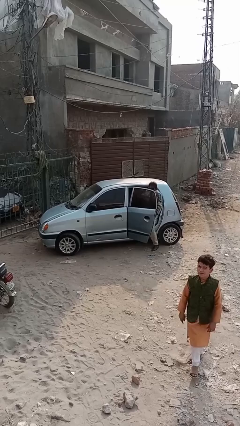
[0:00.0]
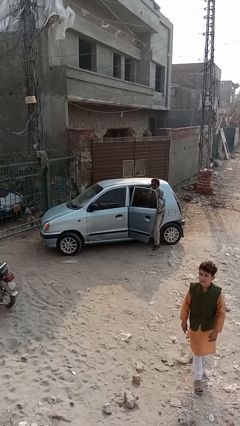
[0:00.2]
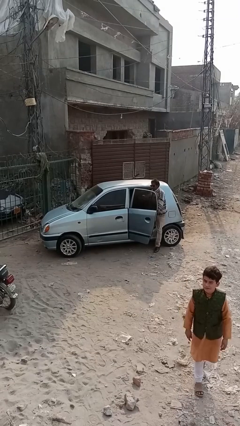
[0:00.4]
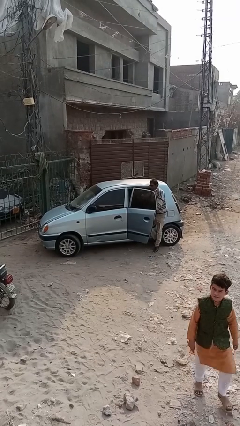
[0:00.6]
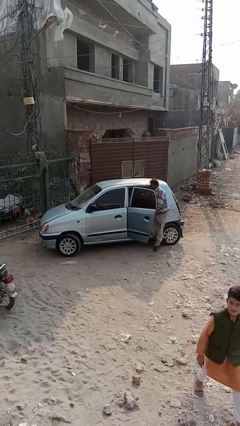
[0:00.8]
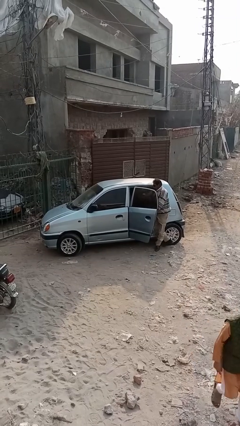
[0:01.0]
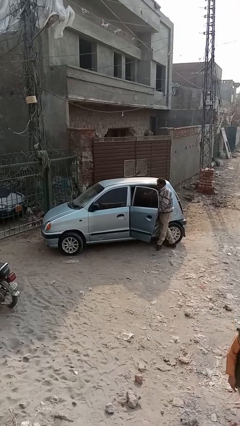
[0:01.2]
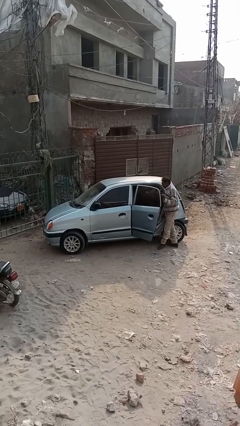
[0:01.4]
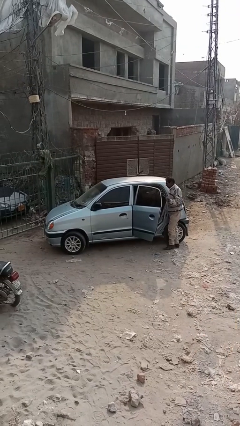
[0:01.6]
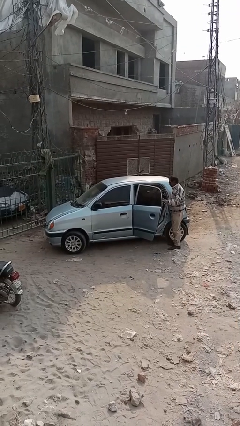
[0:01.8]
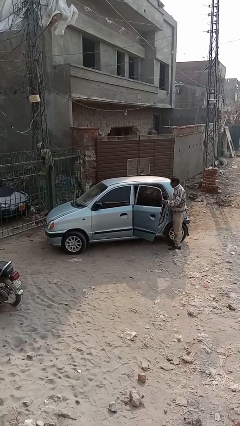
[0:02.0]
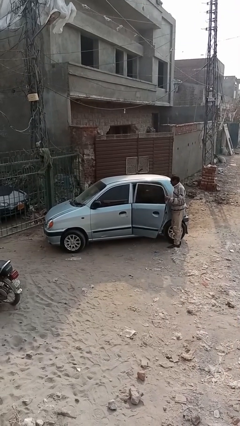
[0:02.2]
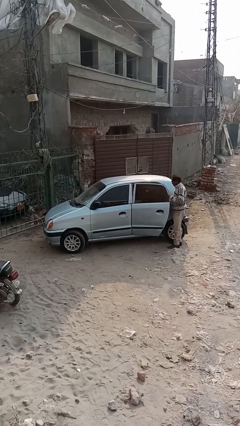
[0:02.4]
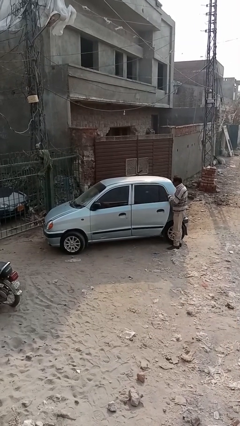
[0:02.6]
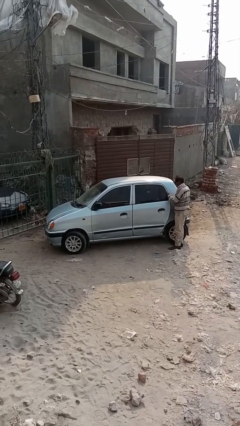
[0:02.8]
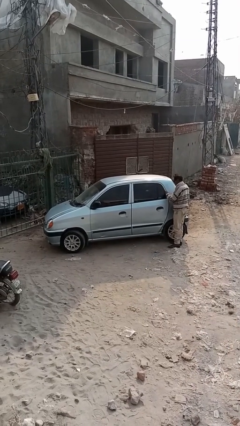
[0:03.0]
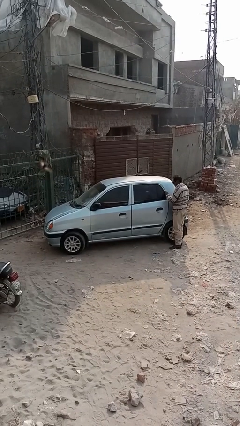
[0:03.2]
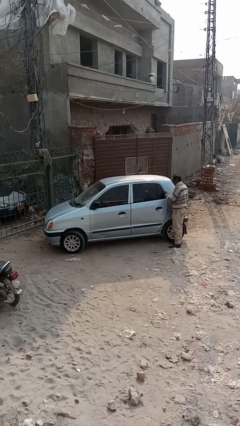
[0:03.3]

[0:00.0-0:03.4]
car drops off person

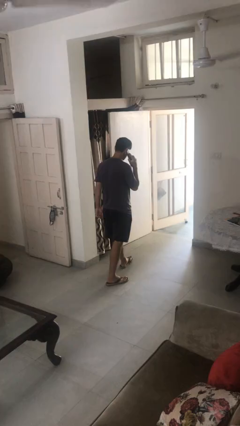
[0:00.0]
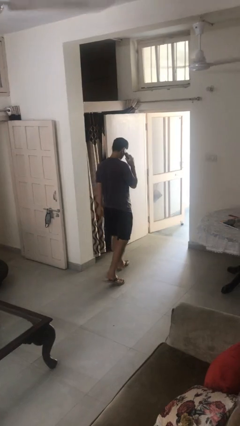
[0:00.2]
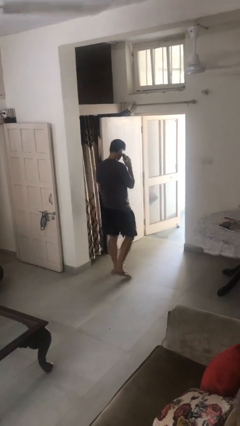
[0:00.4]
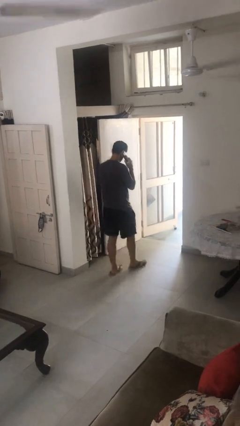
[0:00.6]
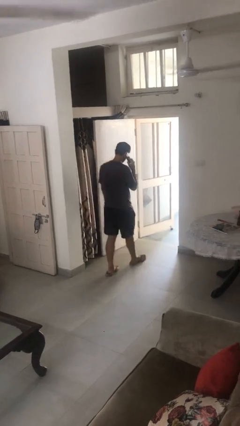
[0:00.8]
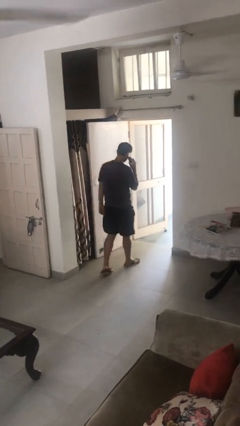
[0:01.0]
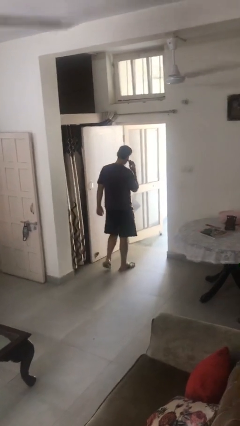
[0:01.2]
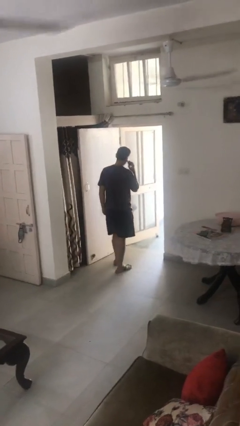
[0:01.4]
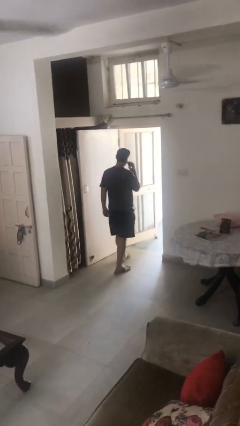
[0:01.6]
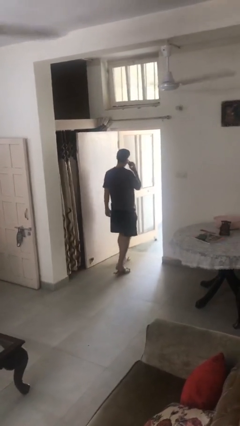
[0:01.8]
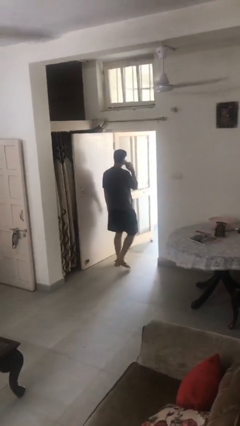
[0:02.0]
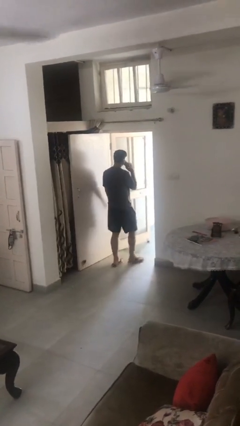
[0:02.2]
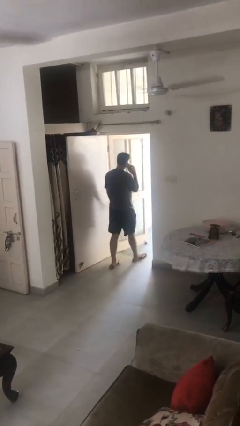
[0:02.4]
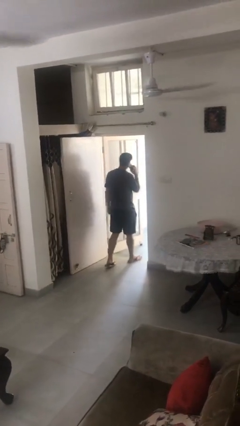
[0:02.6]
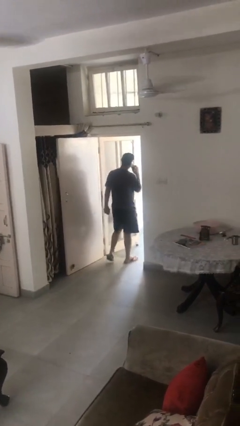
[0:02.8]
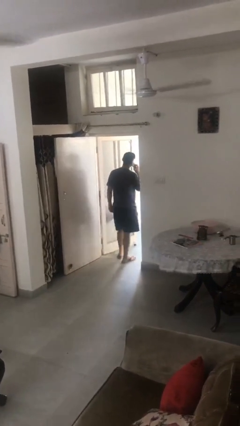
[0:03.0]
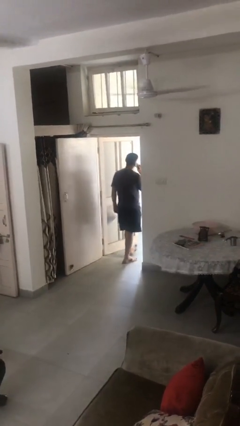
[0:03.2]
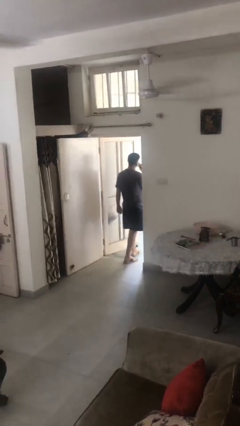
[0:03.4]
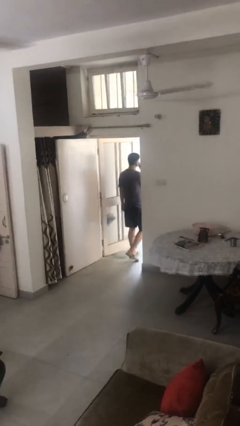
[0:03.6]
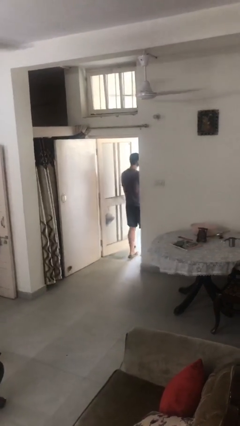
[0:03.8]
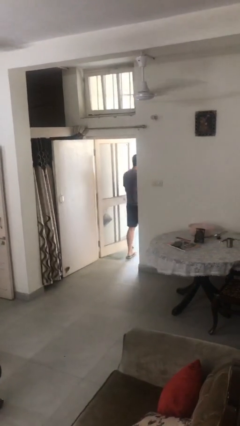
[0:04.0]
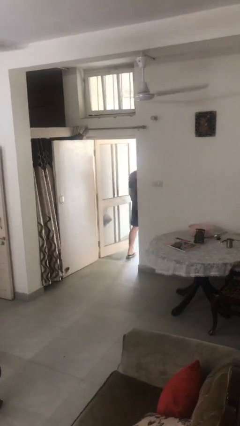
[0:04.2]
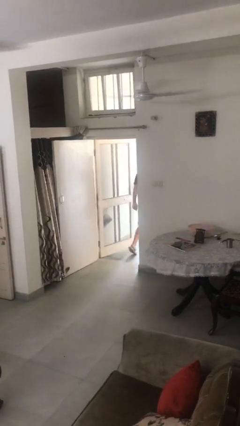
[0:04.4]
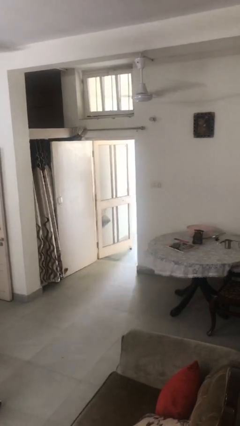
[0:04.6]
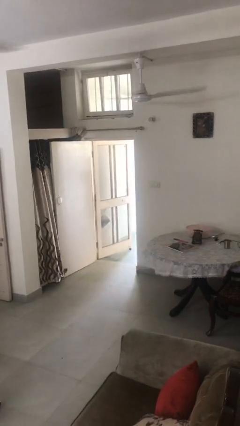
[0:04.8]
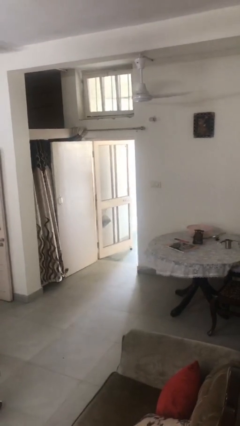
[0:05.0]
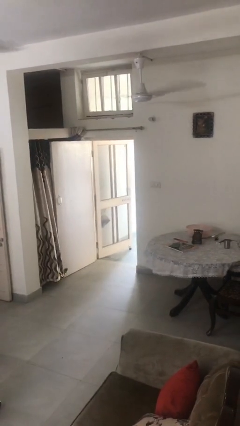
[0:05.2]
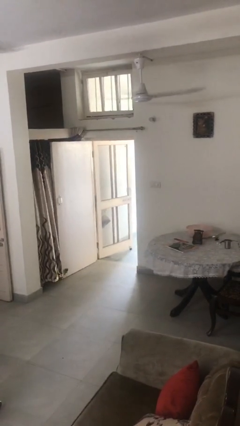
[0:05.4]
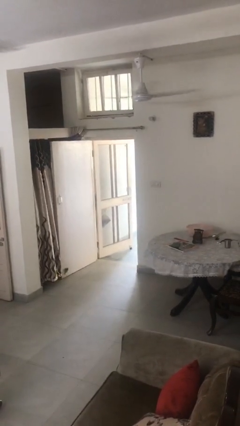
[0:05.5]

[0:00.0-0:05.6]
person exits scene through structure

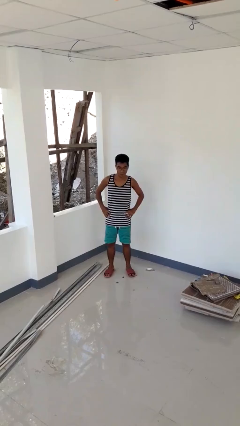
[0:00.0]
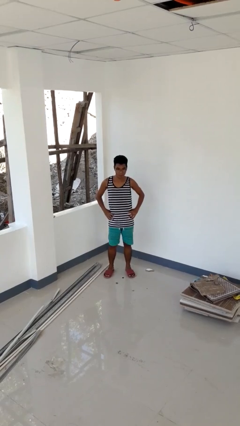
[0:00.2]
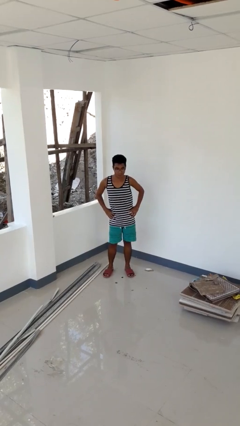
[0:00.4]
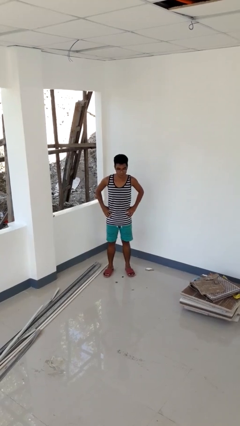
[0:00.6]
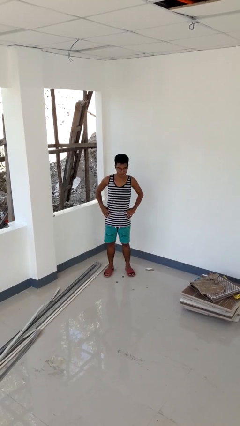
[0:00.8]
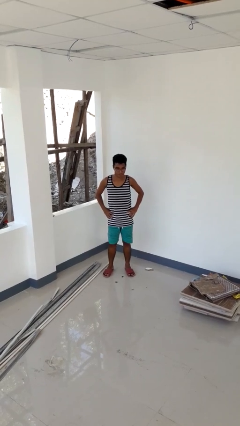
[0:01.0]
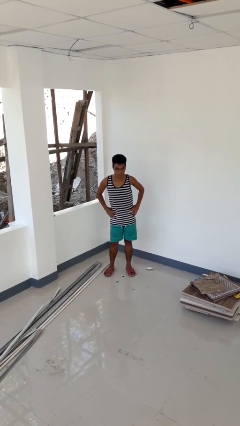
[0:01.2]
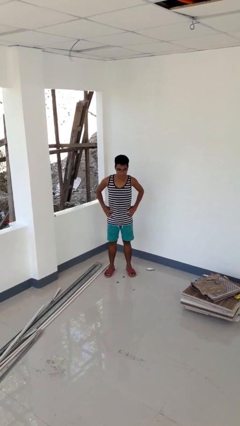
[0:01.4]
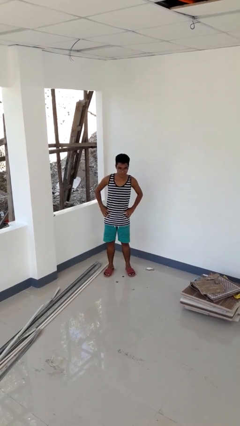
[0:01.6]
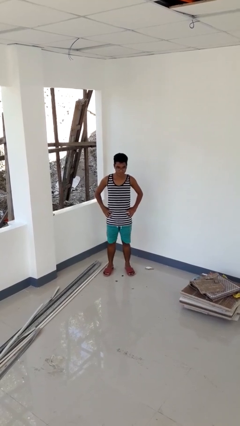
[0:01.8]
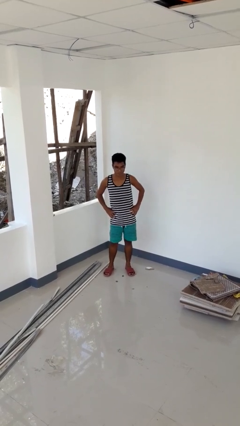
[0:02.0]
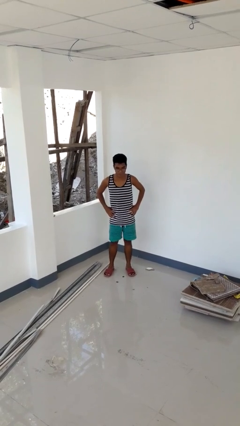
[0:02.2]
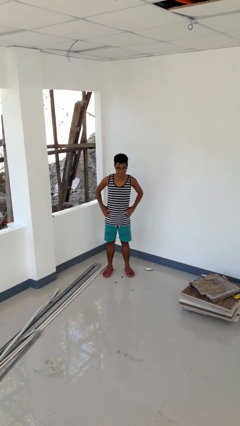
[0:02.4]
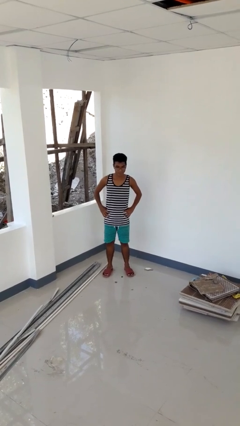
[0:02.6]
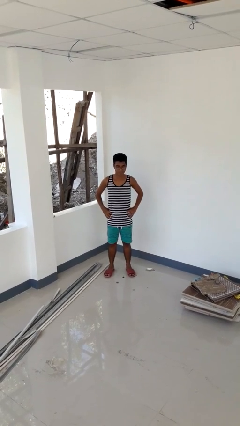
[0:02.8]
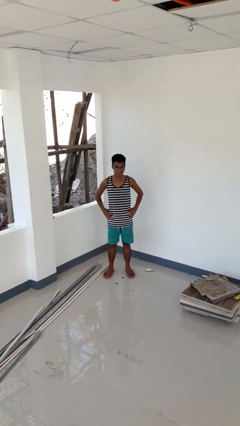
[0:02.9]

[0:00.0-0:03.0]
person wiggles hips

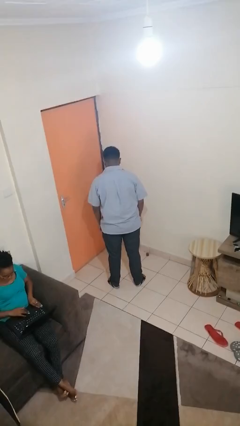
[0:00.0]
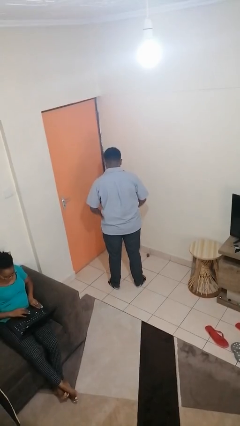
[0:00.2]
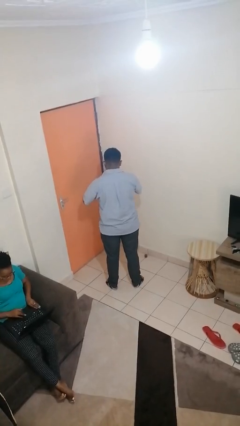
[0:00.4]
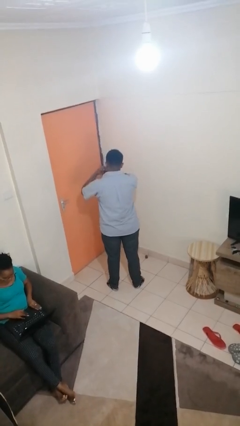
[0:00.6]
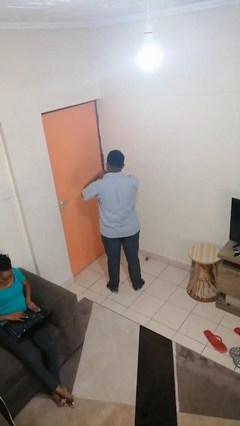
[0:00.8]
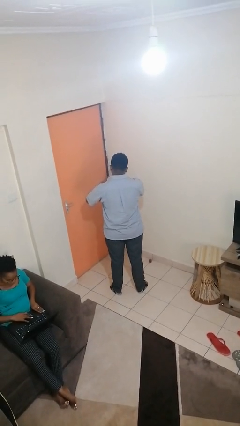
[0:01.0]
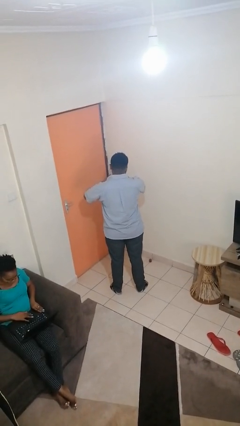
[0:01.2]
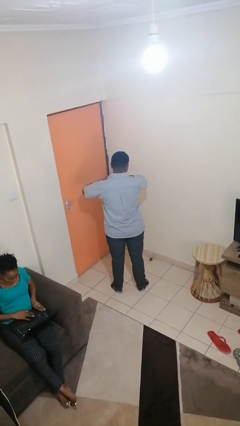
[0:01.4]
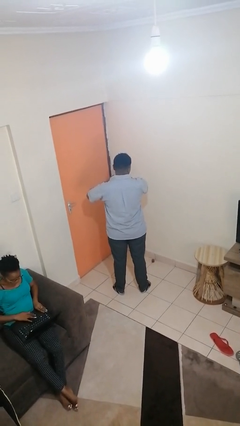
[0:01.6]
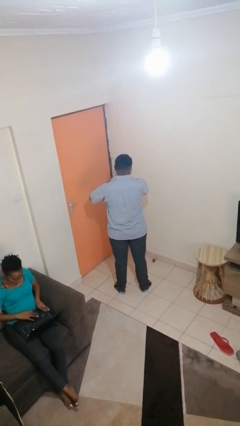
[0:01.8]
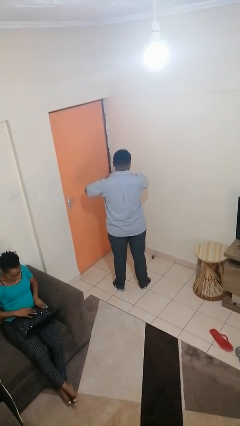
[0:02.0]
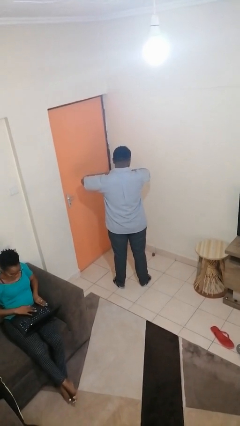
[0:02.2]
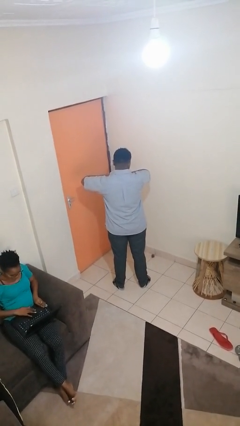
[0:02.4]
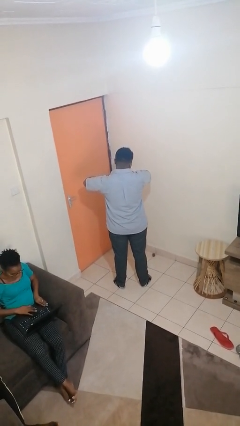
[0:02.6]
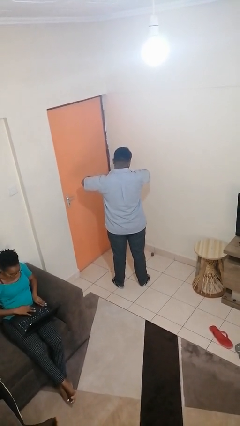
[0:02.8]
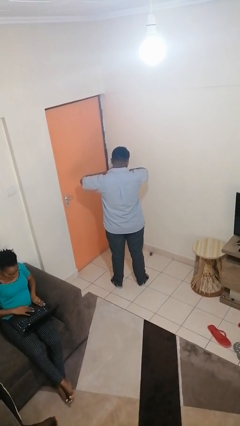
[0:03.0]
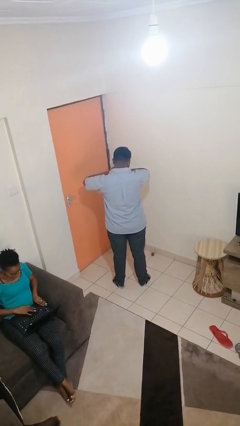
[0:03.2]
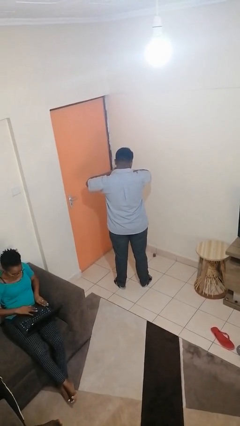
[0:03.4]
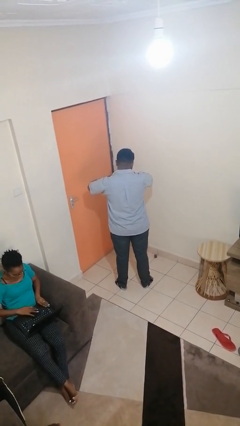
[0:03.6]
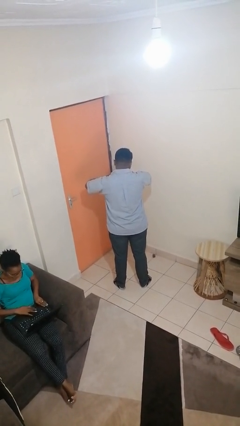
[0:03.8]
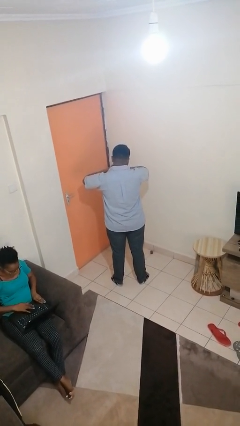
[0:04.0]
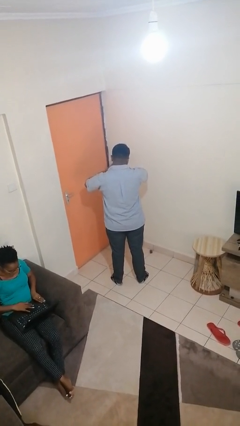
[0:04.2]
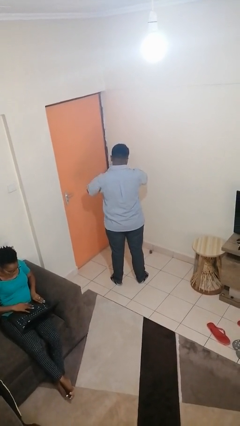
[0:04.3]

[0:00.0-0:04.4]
person cracks knuckles

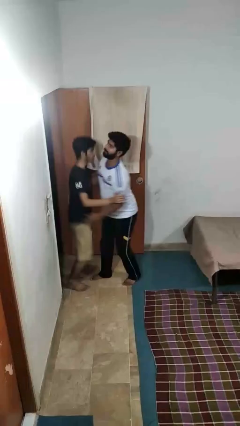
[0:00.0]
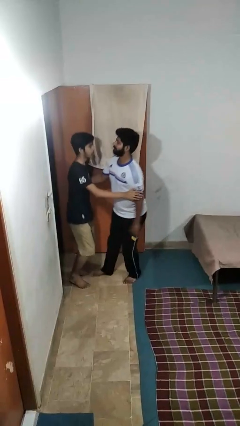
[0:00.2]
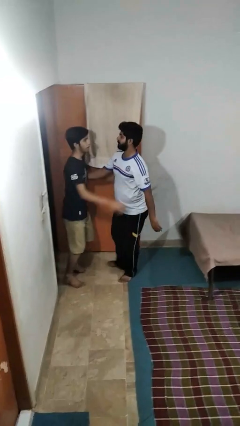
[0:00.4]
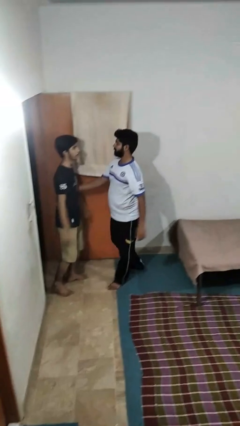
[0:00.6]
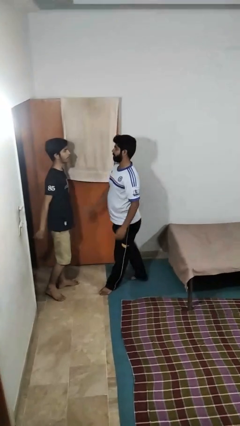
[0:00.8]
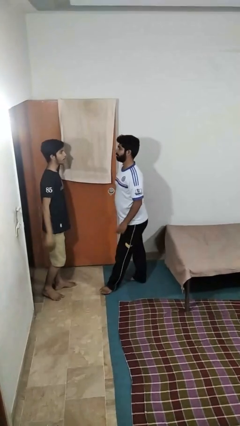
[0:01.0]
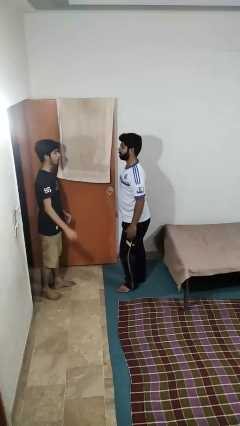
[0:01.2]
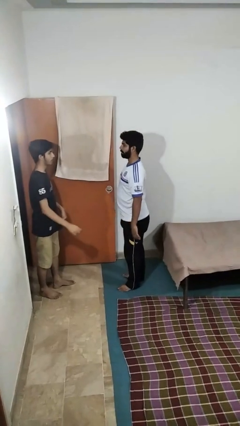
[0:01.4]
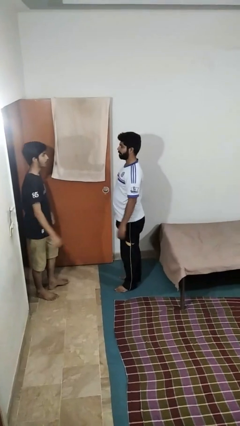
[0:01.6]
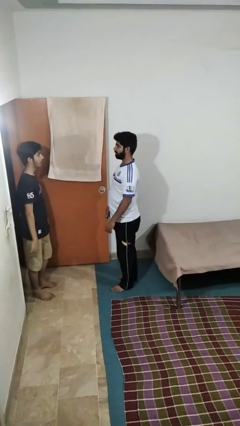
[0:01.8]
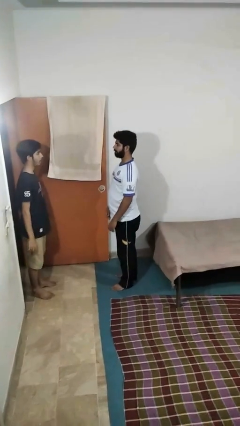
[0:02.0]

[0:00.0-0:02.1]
person puts down person
